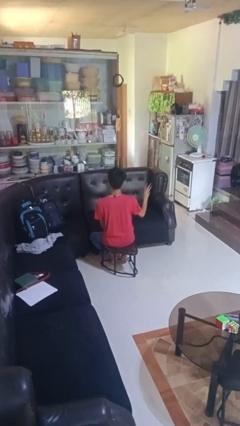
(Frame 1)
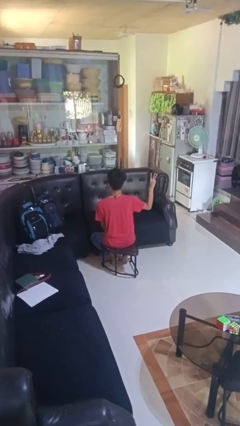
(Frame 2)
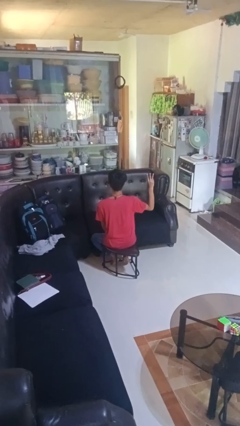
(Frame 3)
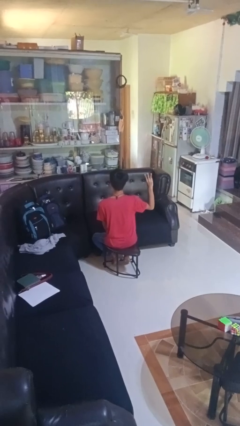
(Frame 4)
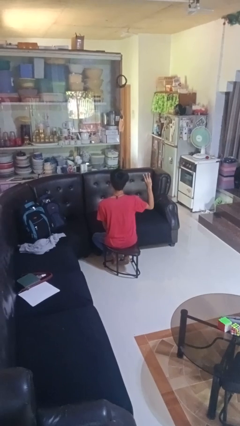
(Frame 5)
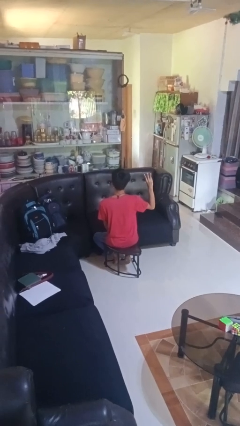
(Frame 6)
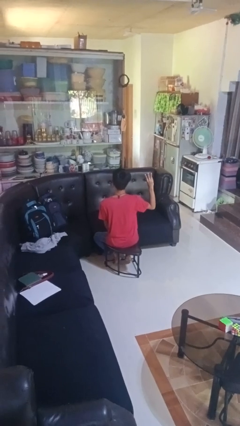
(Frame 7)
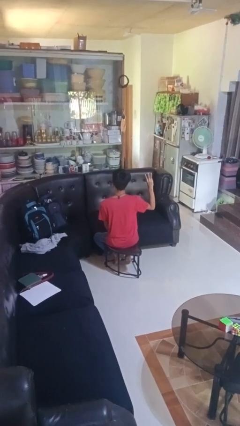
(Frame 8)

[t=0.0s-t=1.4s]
person gestures number three

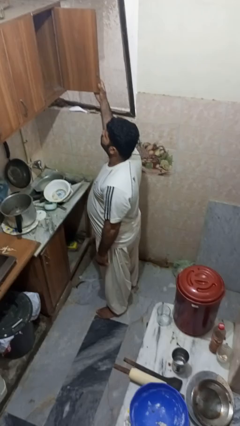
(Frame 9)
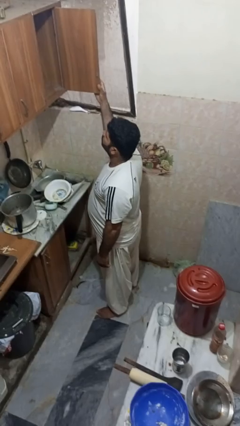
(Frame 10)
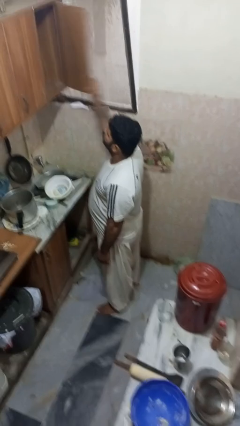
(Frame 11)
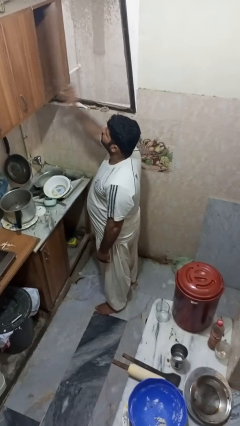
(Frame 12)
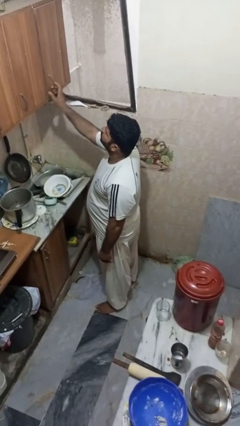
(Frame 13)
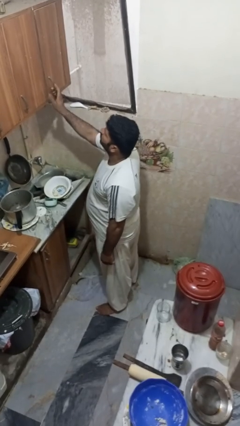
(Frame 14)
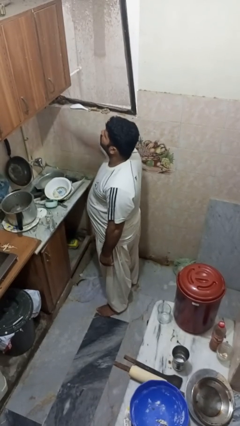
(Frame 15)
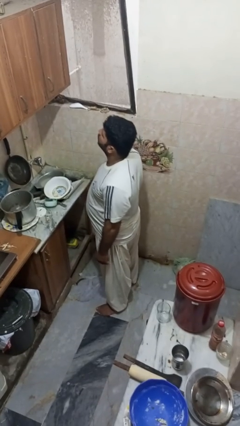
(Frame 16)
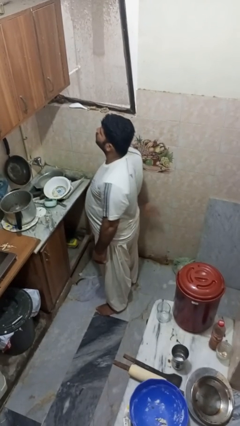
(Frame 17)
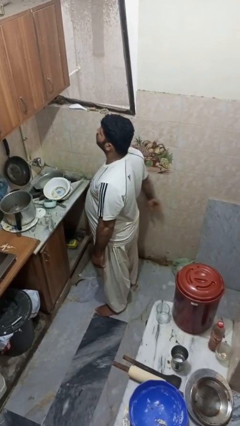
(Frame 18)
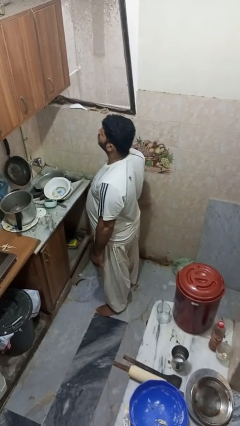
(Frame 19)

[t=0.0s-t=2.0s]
person closes cabinet

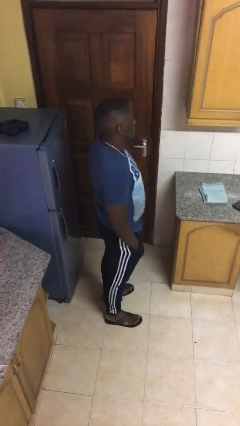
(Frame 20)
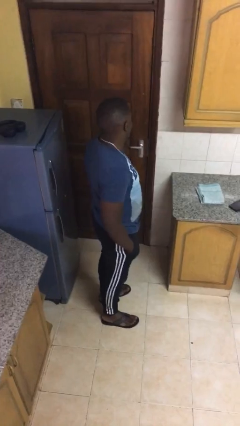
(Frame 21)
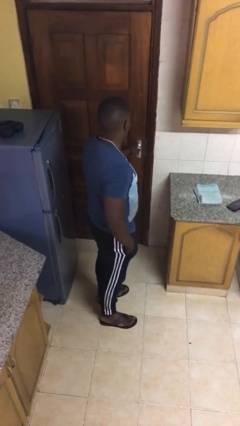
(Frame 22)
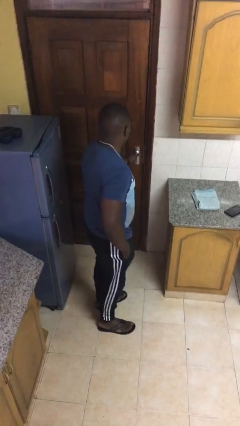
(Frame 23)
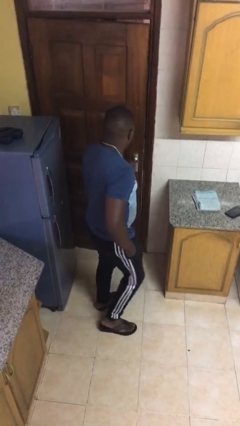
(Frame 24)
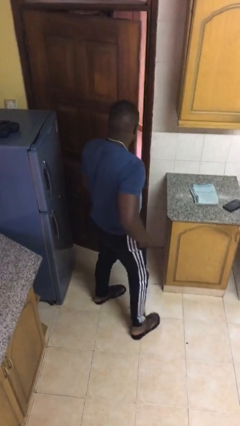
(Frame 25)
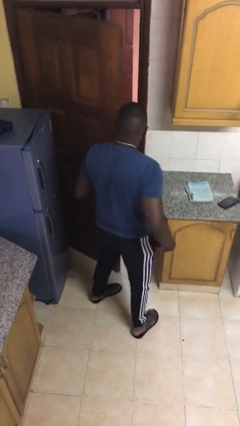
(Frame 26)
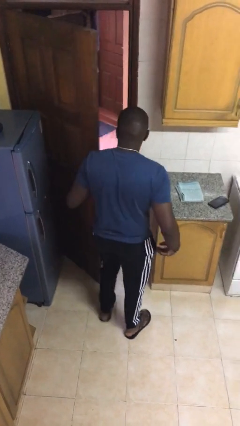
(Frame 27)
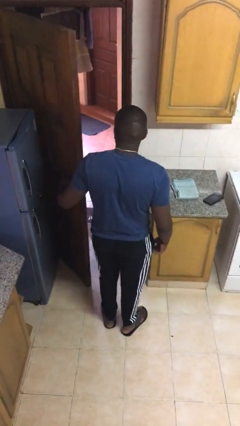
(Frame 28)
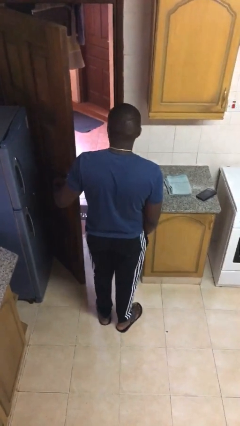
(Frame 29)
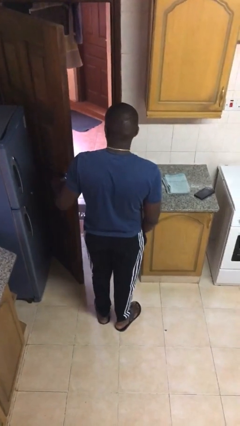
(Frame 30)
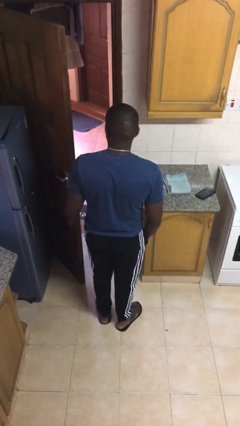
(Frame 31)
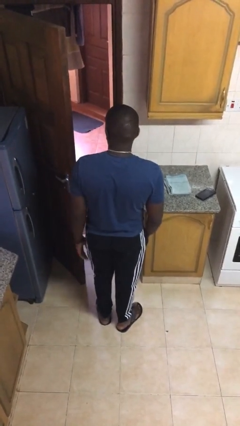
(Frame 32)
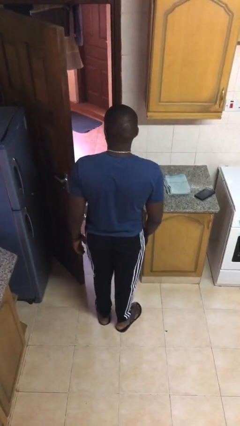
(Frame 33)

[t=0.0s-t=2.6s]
person opens facility door

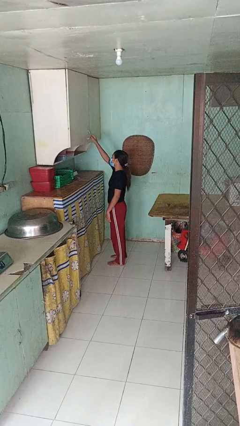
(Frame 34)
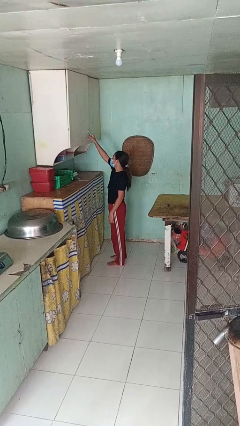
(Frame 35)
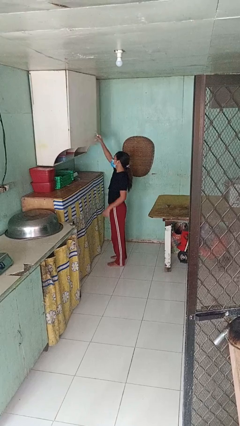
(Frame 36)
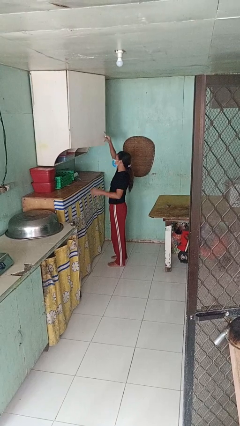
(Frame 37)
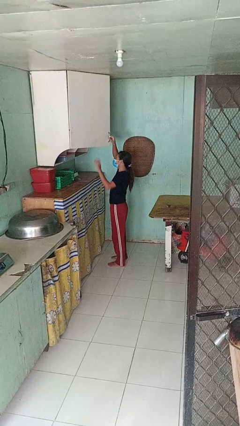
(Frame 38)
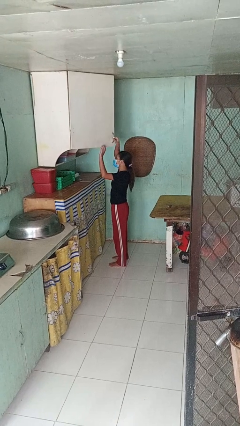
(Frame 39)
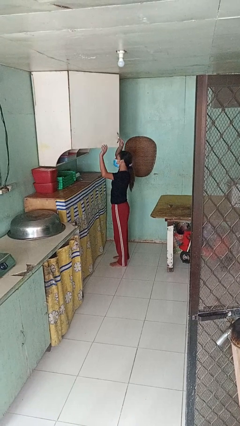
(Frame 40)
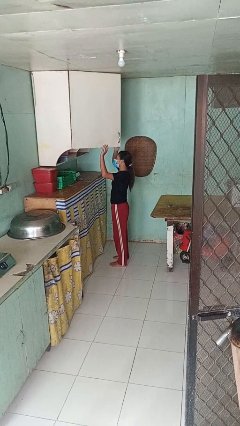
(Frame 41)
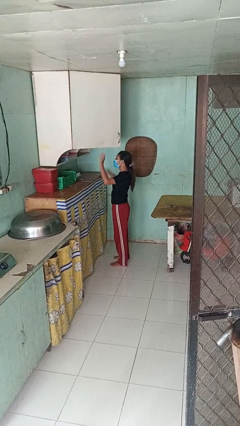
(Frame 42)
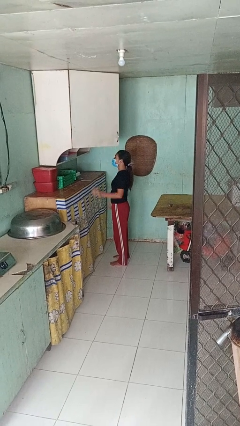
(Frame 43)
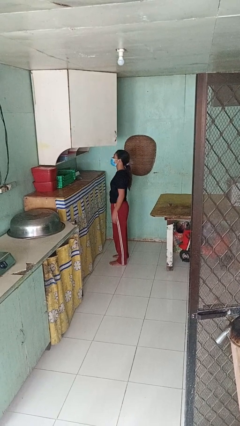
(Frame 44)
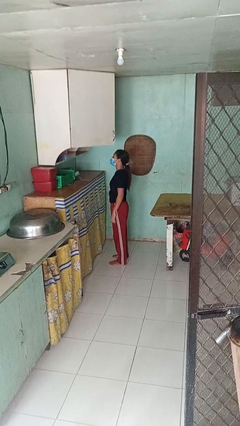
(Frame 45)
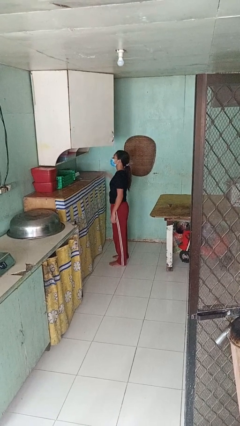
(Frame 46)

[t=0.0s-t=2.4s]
person opens cabinet

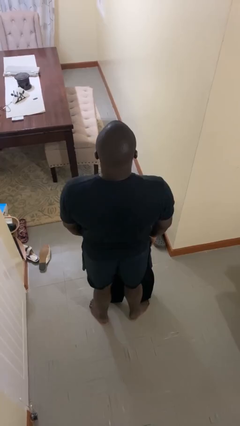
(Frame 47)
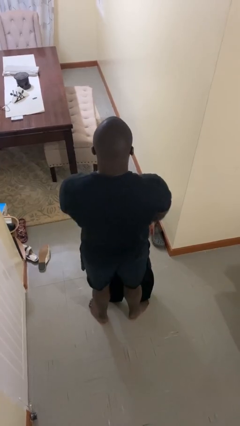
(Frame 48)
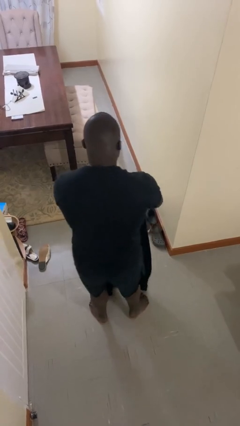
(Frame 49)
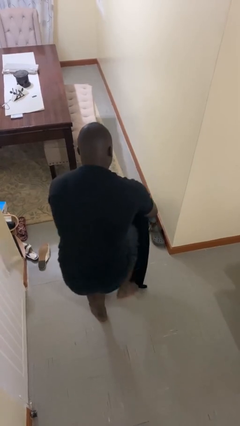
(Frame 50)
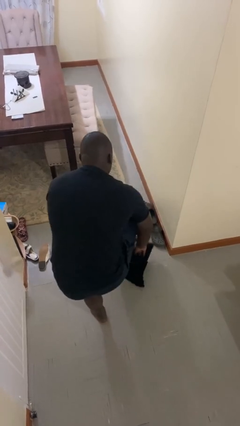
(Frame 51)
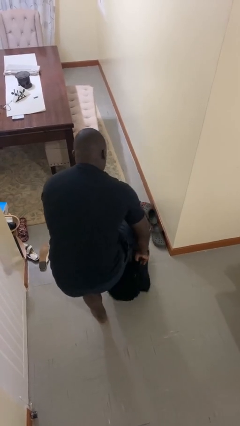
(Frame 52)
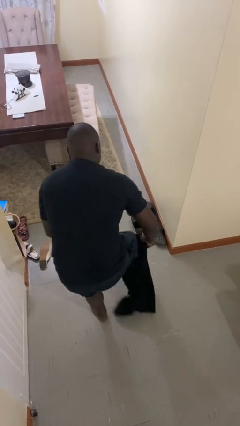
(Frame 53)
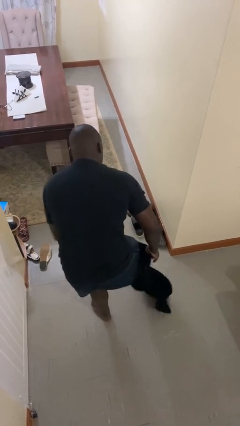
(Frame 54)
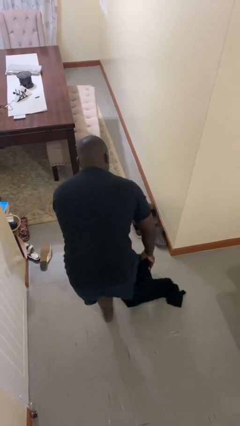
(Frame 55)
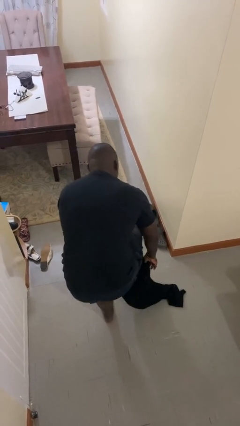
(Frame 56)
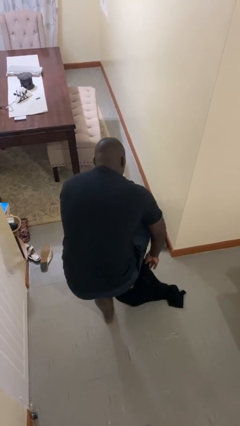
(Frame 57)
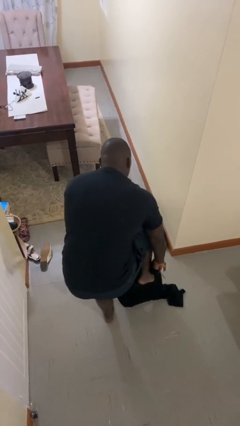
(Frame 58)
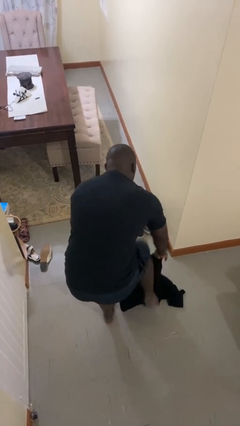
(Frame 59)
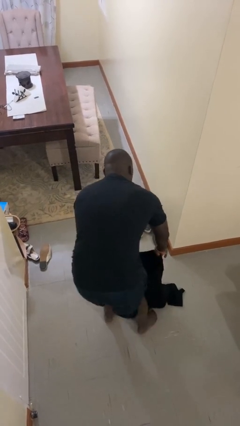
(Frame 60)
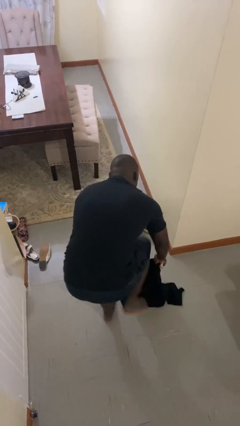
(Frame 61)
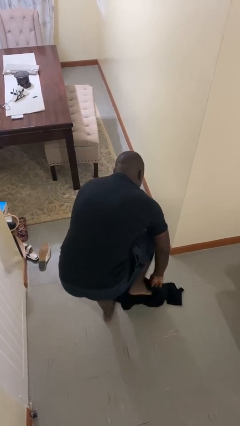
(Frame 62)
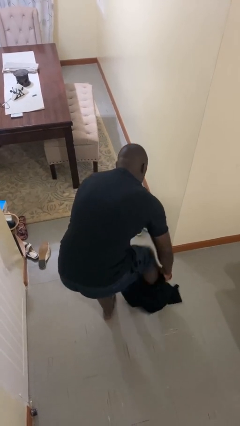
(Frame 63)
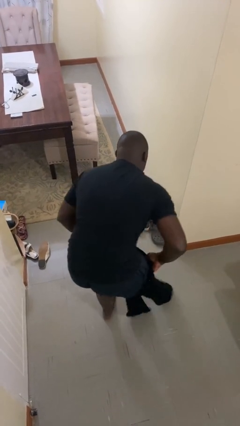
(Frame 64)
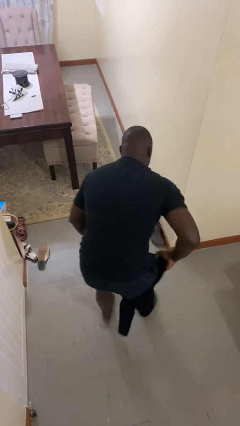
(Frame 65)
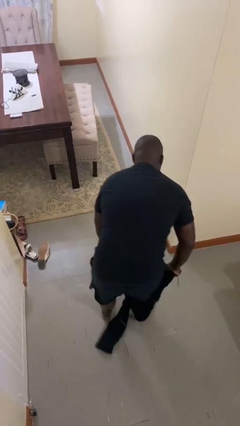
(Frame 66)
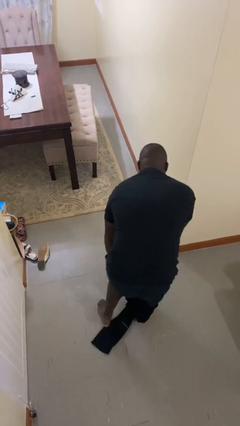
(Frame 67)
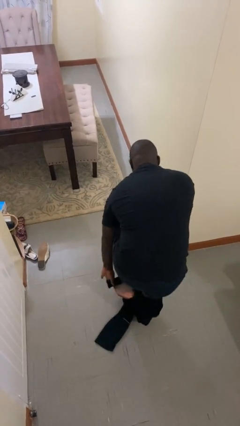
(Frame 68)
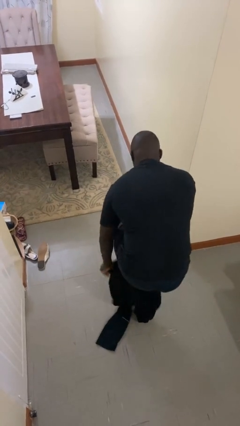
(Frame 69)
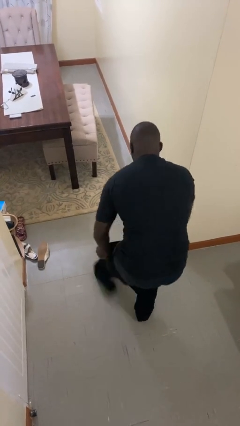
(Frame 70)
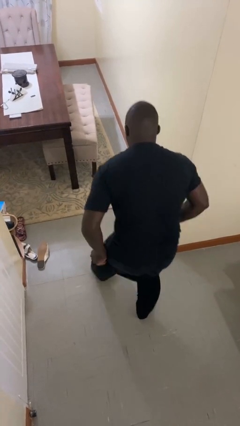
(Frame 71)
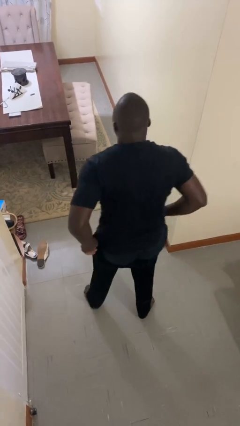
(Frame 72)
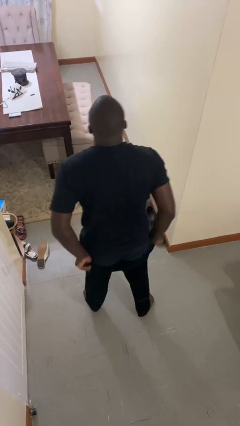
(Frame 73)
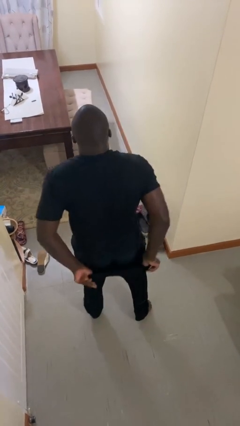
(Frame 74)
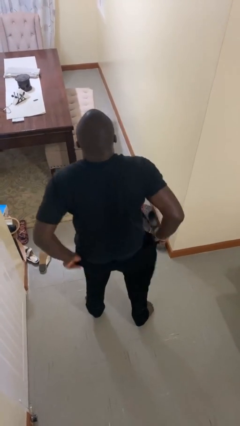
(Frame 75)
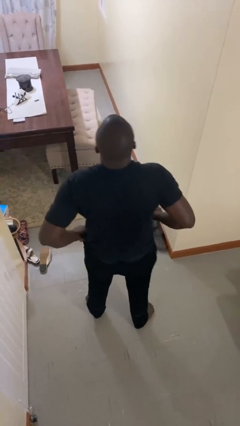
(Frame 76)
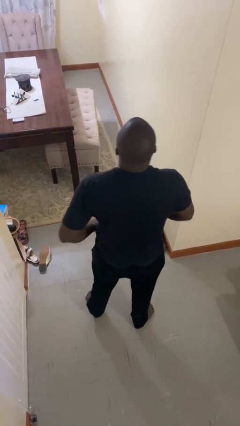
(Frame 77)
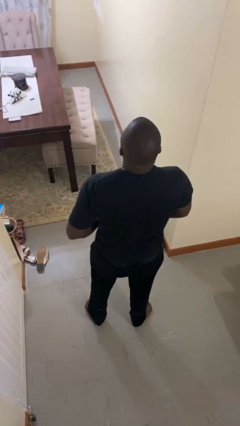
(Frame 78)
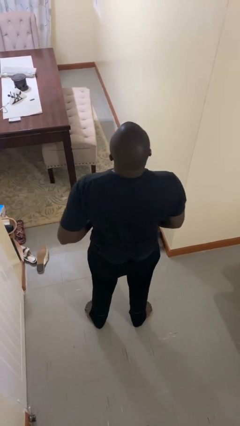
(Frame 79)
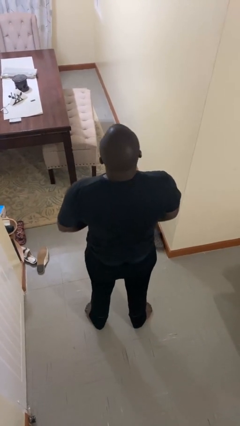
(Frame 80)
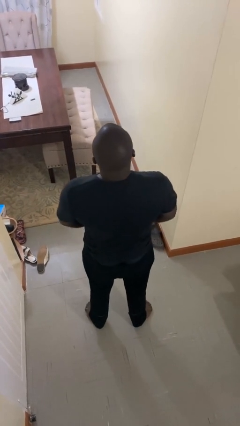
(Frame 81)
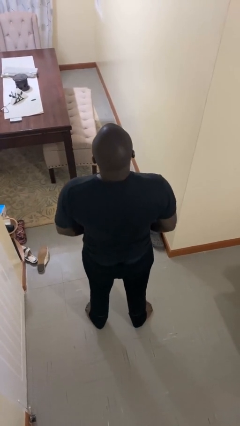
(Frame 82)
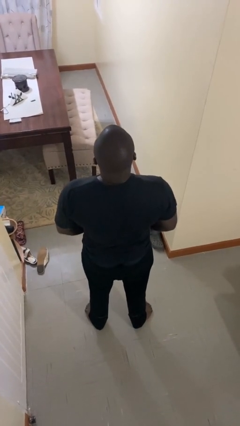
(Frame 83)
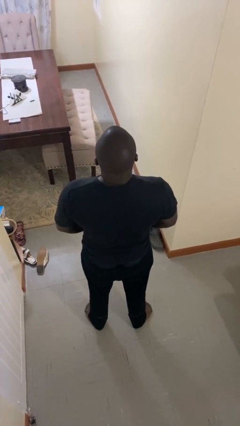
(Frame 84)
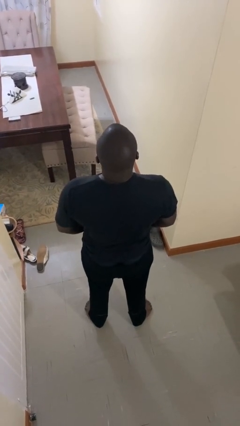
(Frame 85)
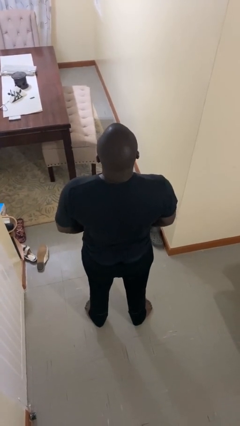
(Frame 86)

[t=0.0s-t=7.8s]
person takes off pants

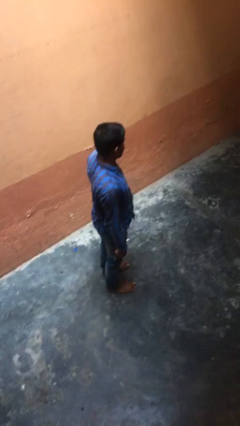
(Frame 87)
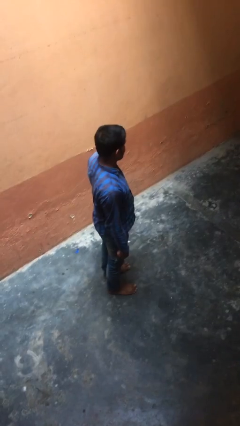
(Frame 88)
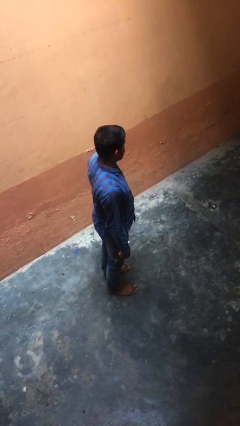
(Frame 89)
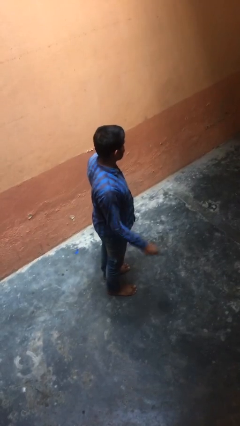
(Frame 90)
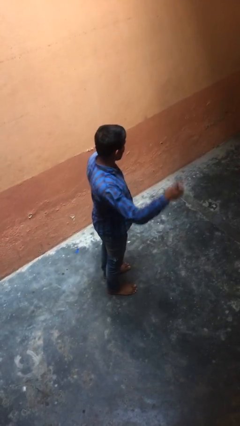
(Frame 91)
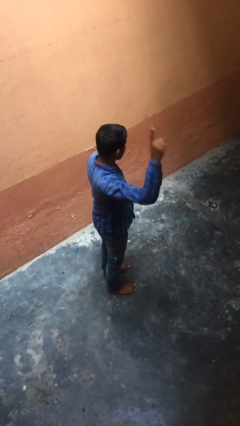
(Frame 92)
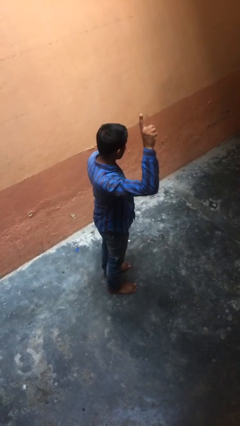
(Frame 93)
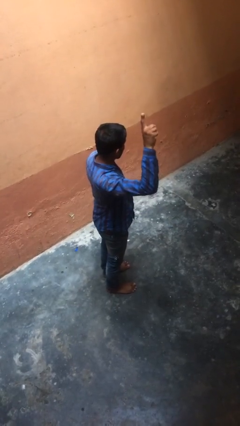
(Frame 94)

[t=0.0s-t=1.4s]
person gestures number one
